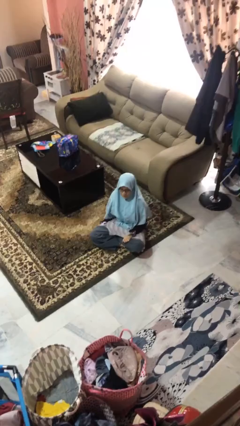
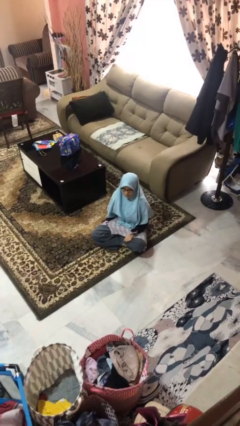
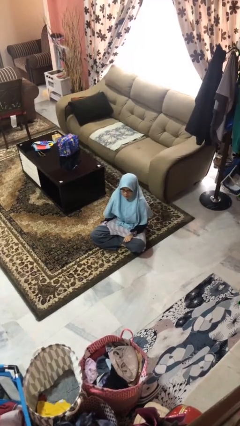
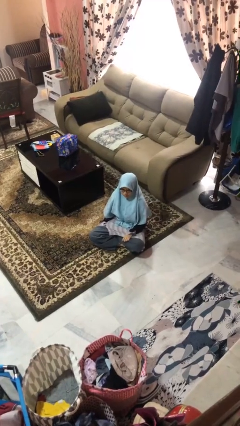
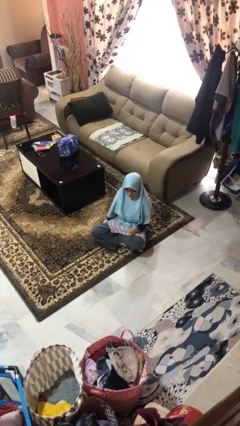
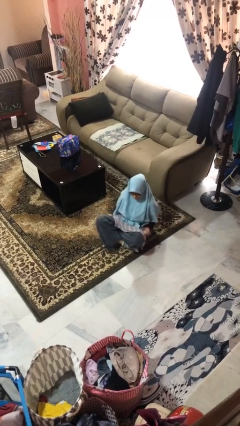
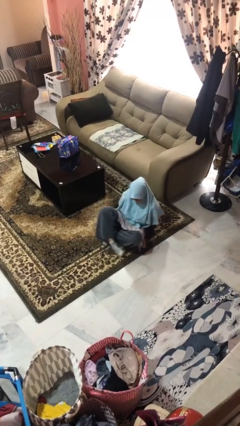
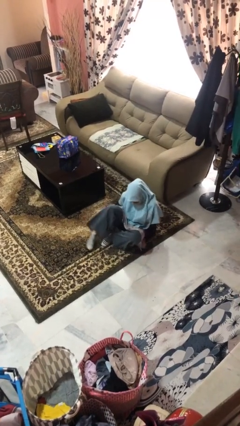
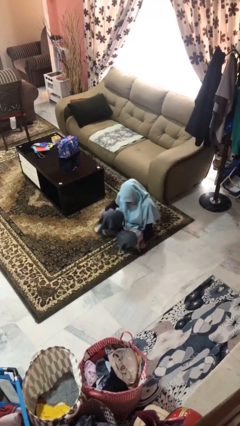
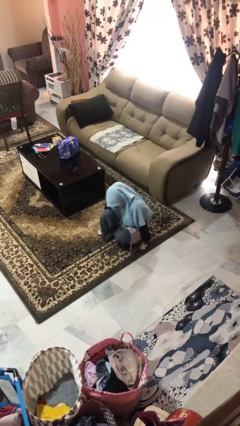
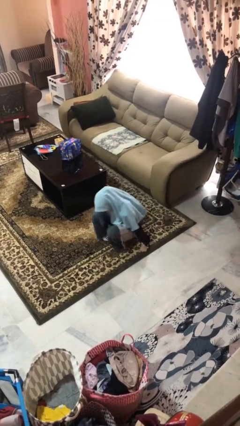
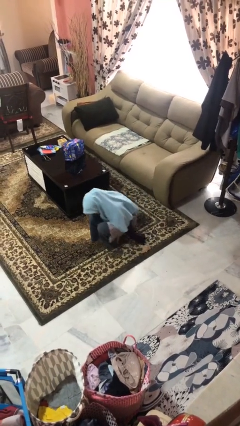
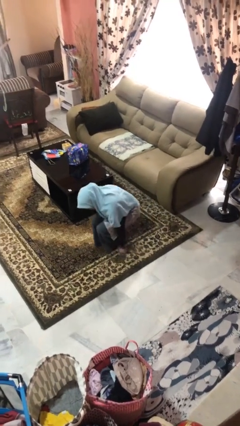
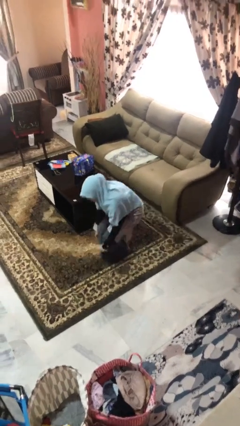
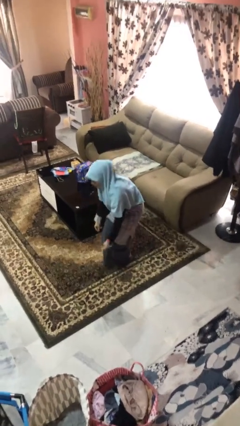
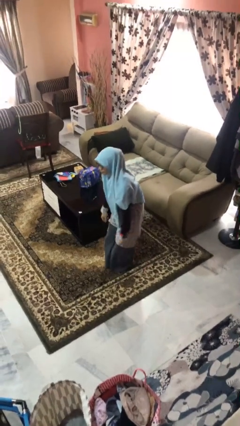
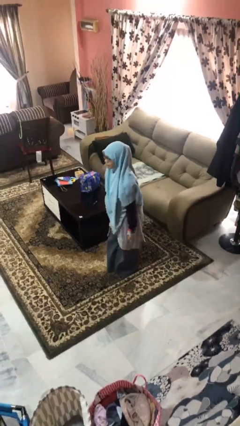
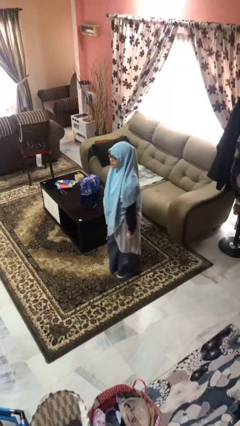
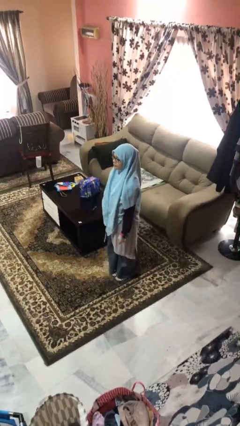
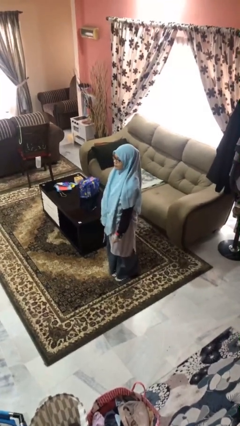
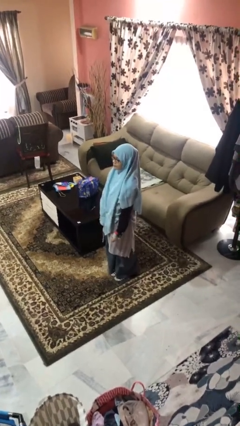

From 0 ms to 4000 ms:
person stands up from floor

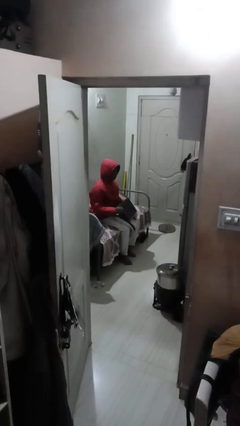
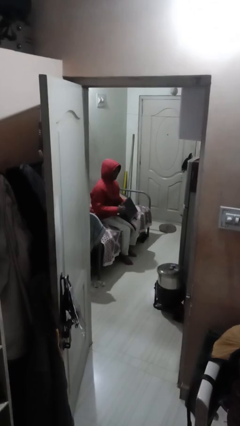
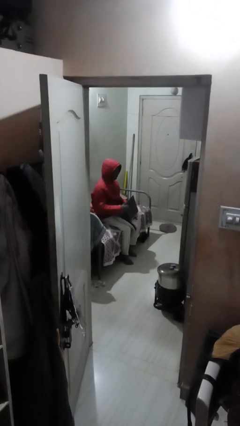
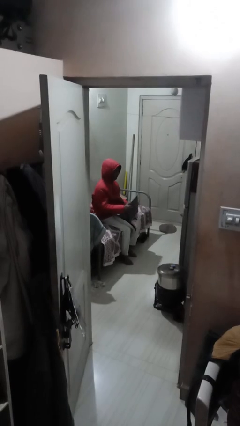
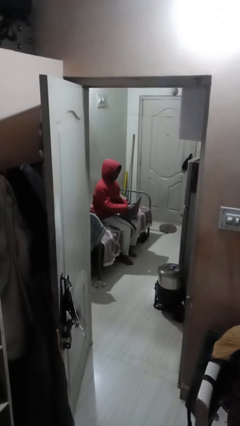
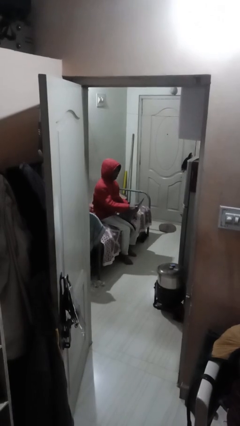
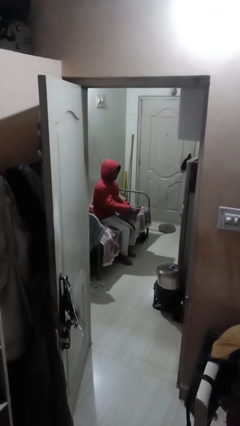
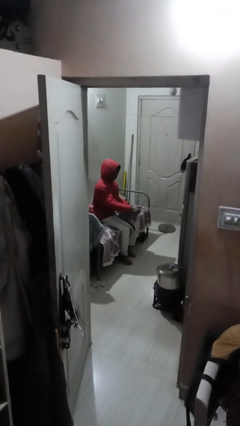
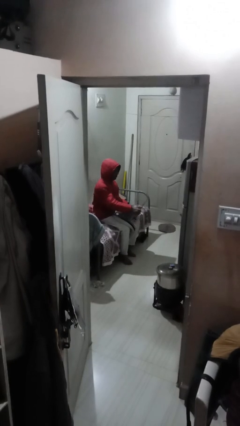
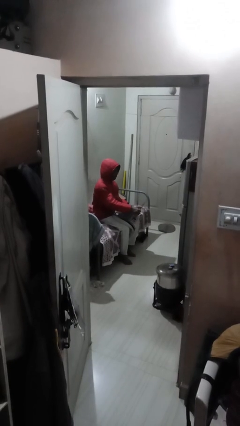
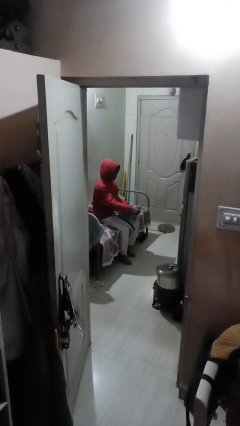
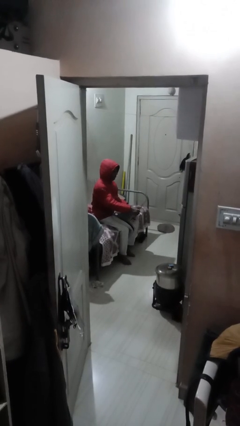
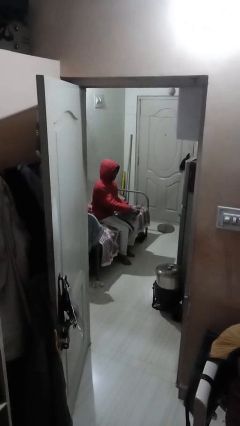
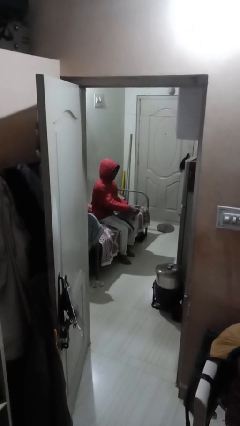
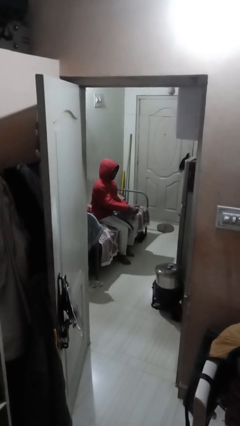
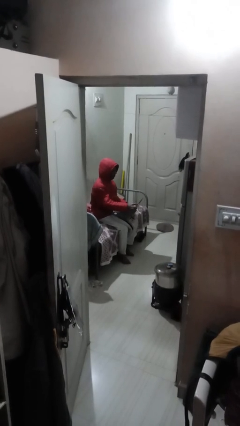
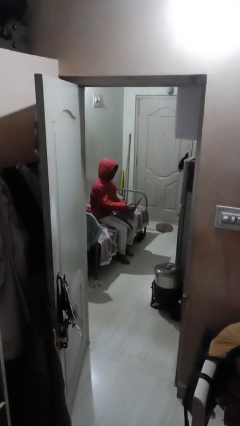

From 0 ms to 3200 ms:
person interacts with laptop

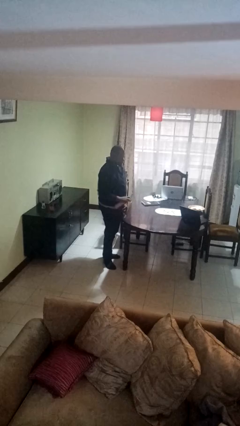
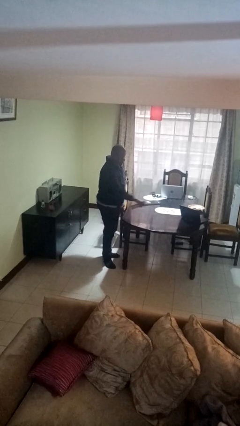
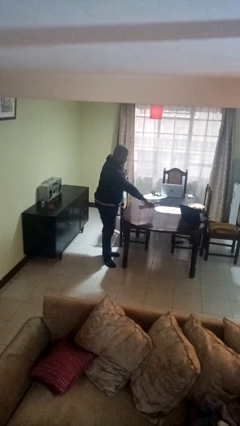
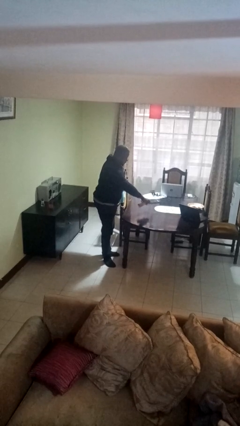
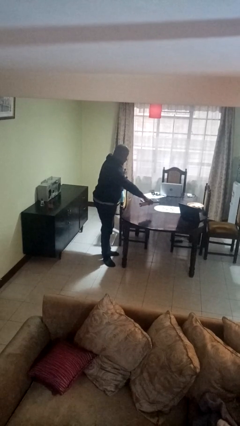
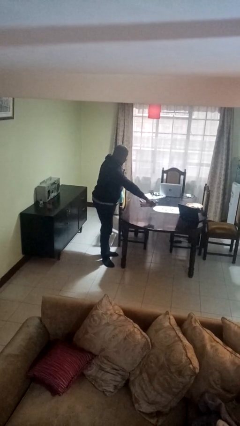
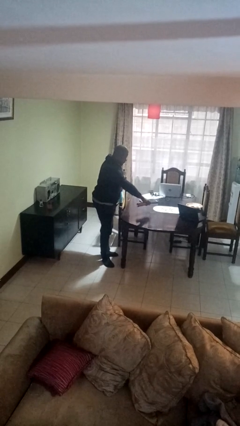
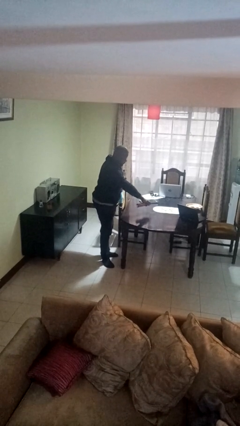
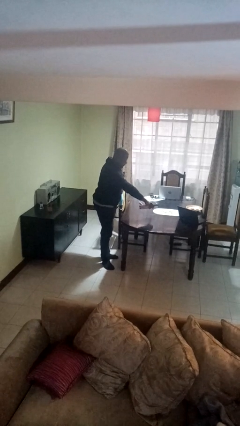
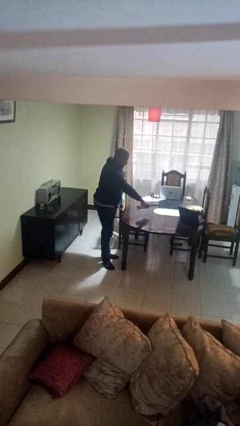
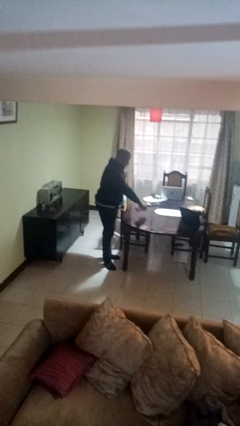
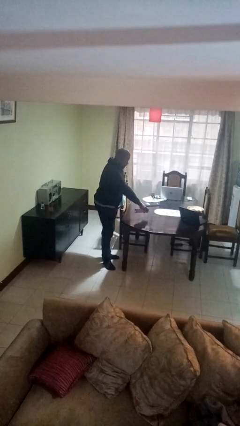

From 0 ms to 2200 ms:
person sprays from bottle

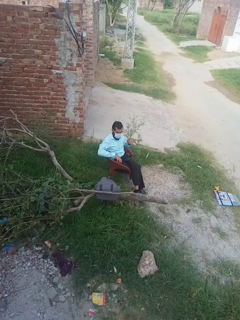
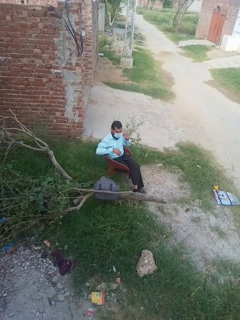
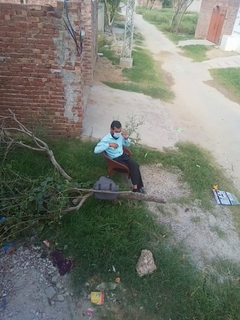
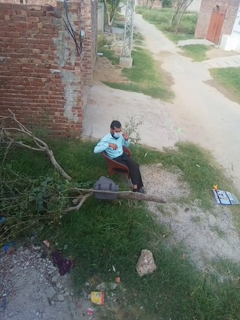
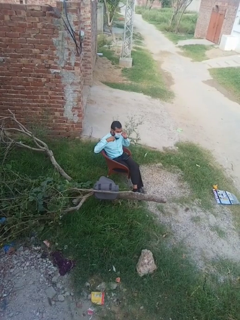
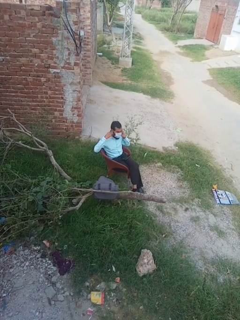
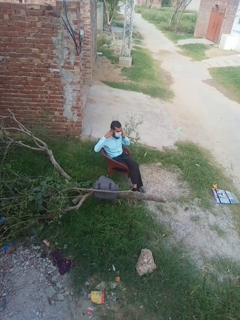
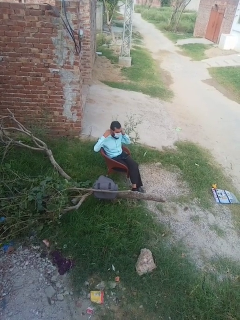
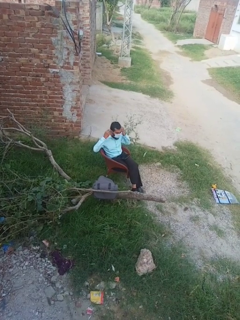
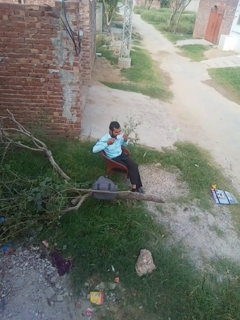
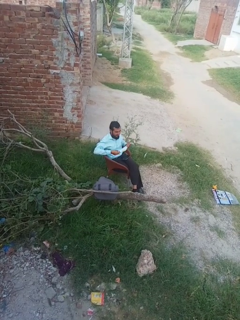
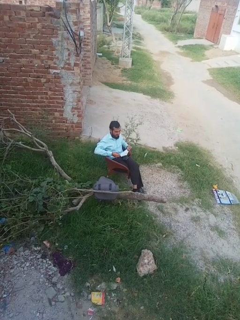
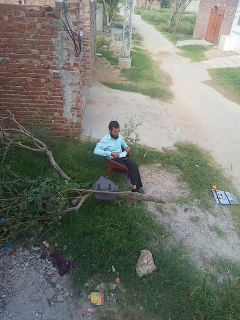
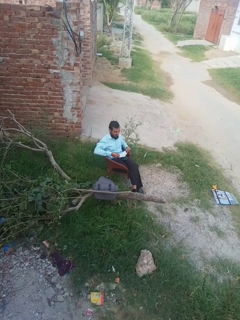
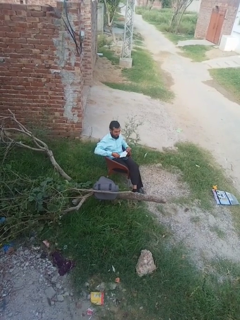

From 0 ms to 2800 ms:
person takes off facemask

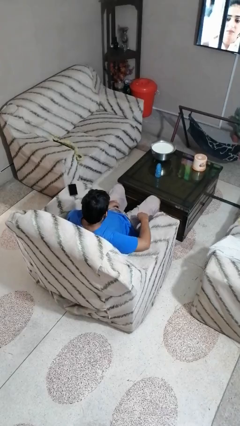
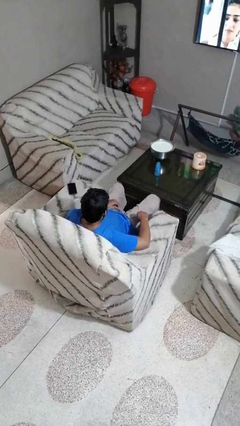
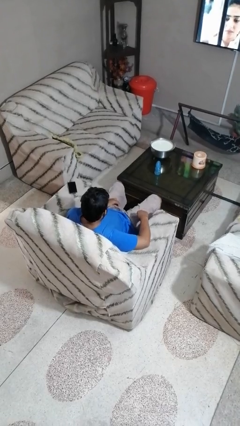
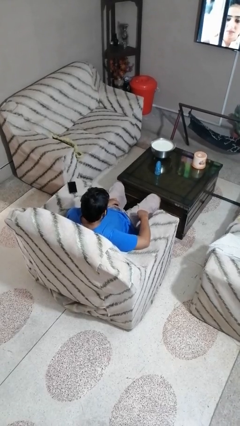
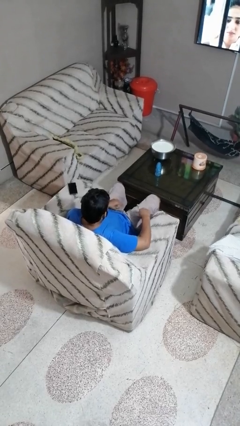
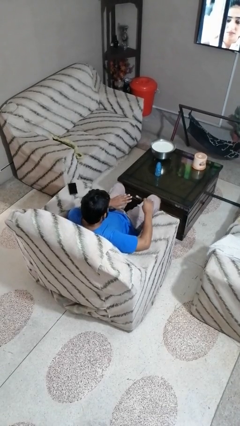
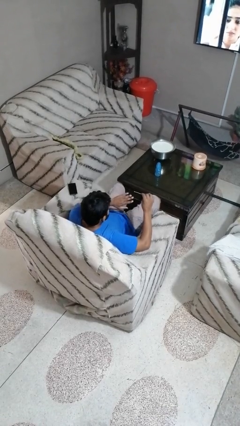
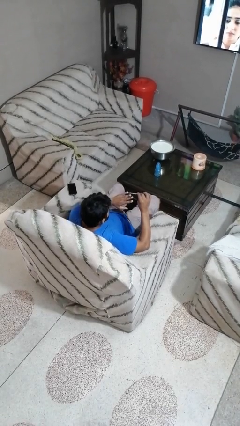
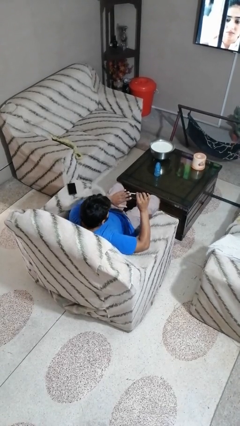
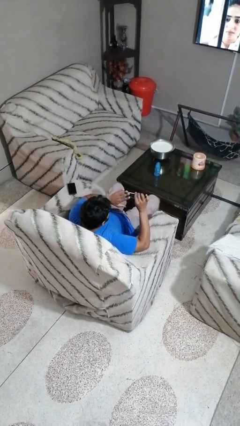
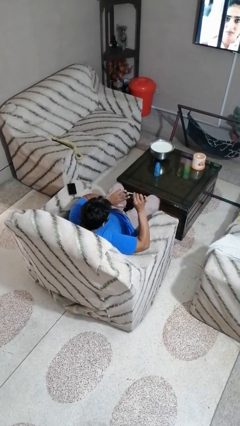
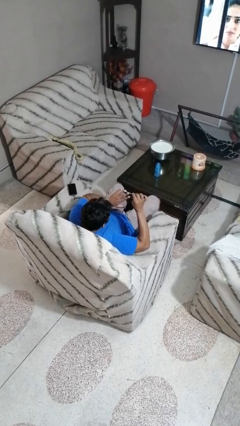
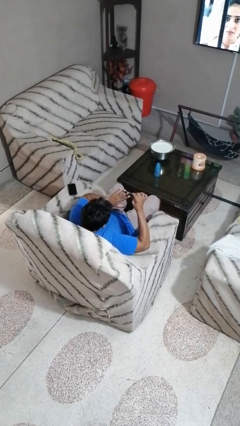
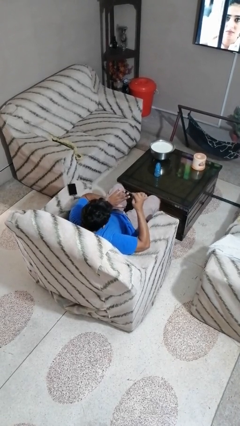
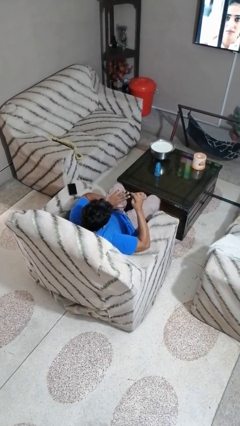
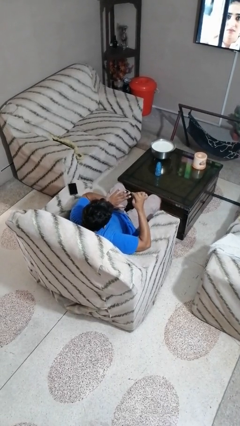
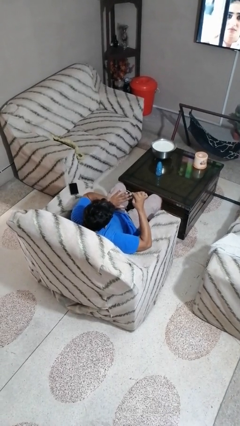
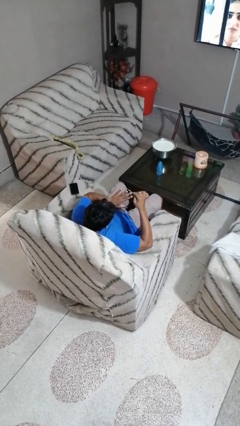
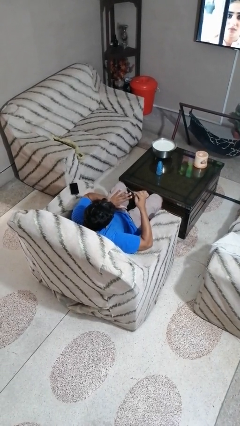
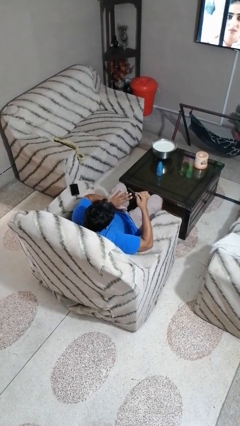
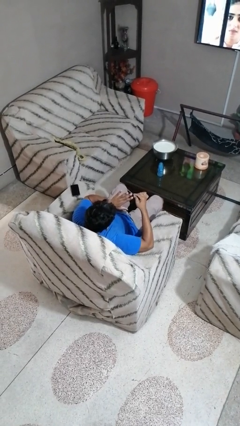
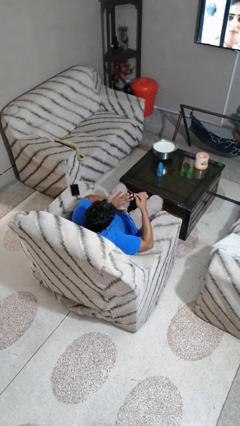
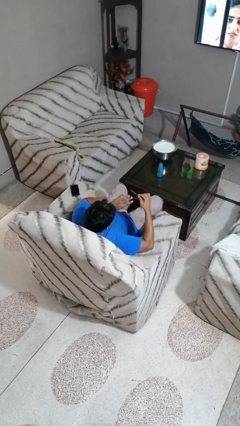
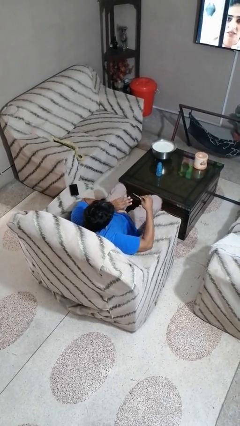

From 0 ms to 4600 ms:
person files fingernails

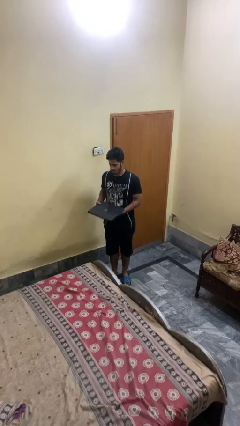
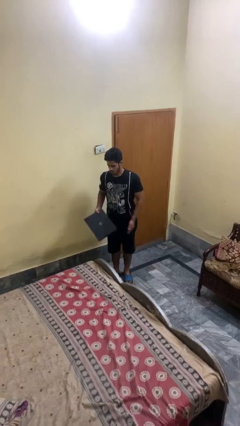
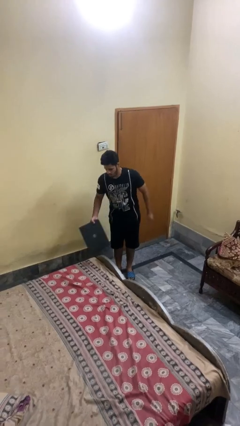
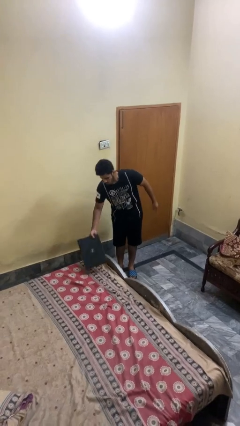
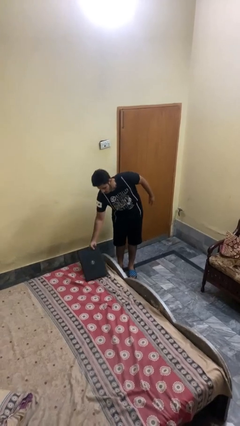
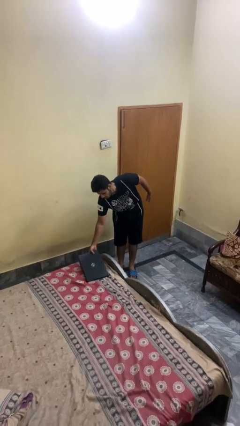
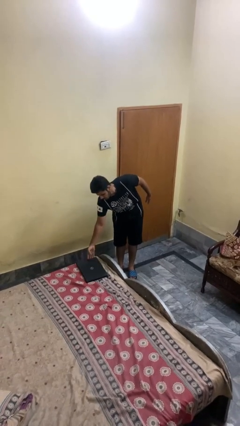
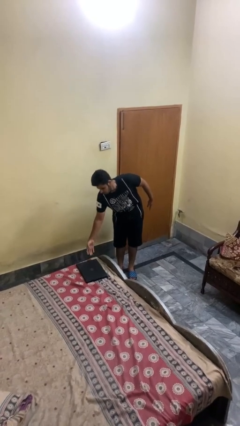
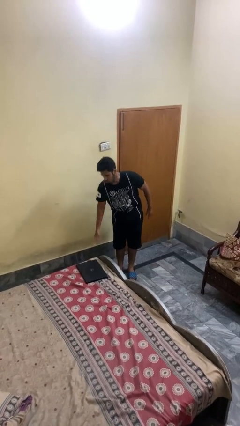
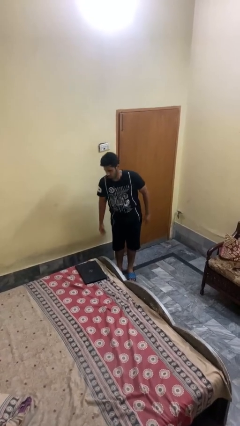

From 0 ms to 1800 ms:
person puts down object on bed
